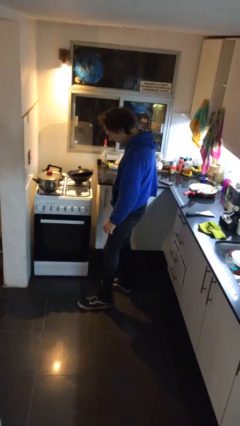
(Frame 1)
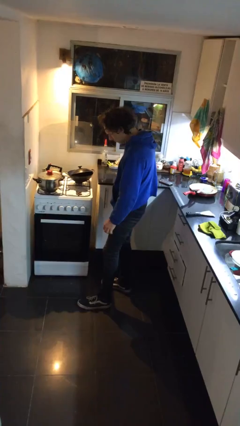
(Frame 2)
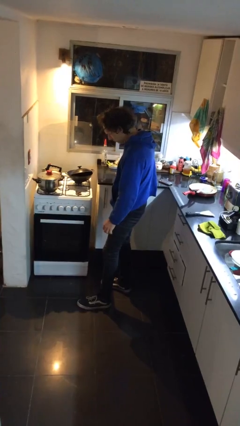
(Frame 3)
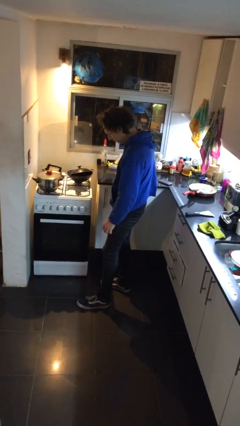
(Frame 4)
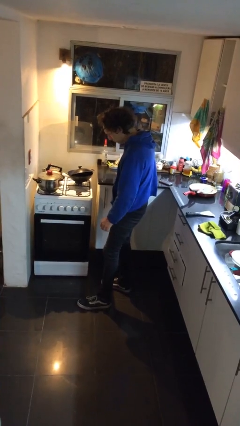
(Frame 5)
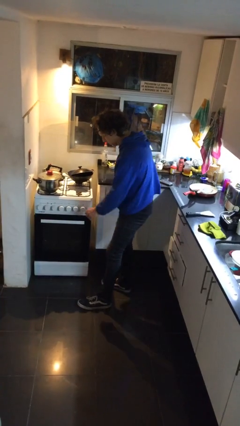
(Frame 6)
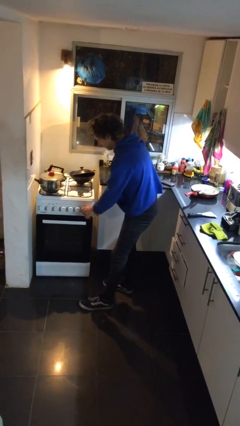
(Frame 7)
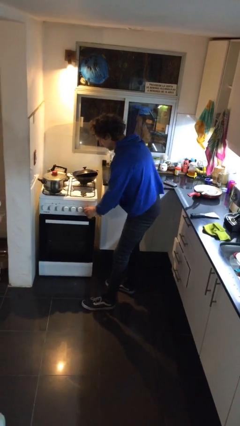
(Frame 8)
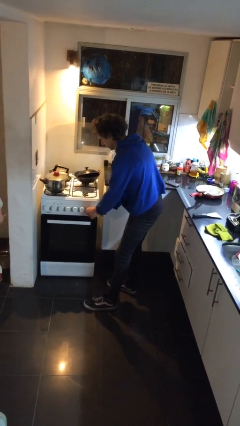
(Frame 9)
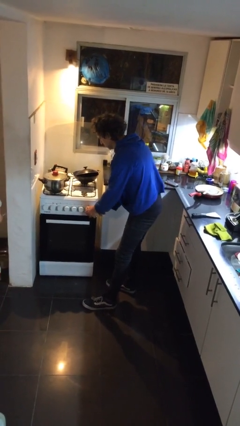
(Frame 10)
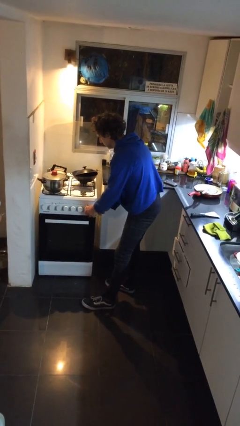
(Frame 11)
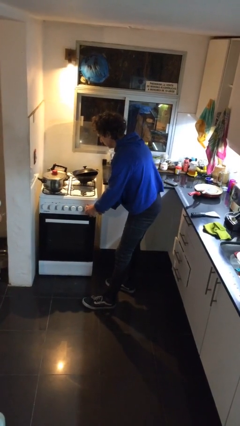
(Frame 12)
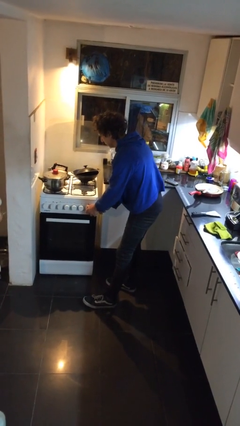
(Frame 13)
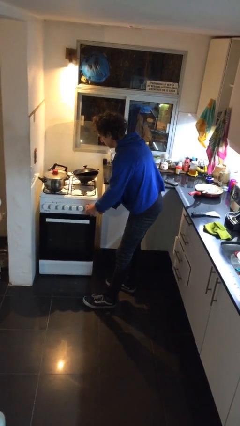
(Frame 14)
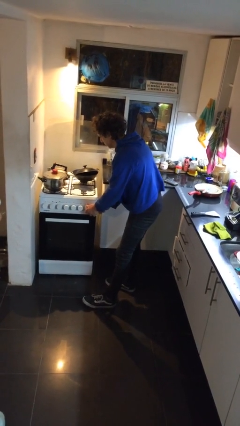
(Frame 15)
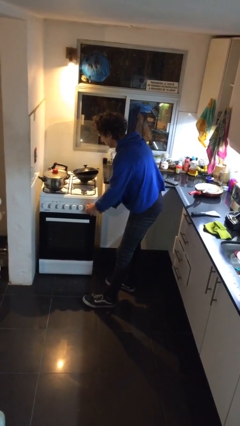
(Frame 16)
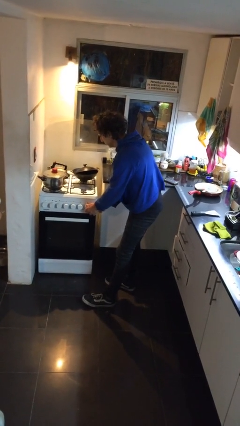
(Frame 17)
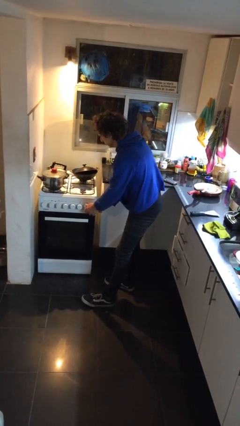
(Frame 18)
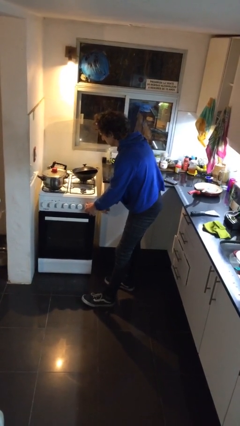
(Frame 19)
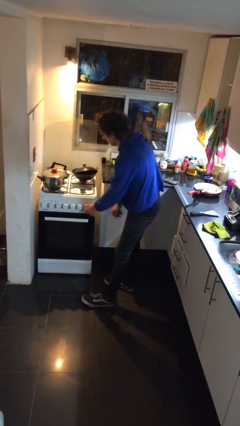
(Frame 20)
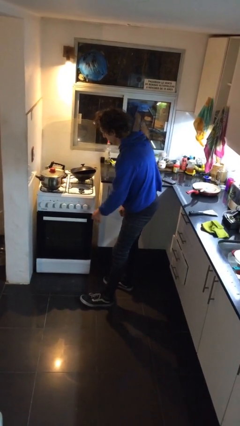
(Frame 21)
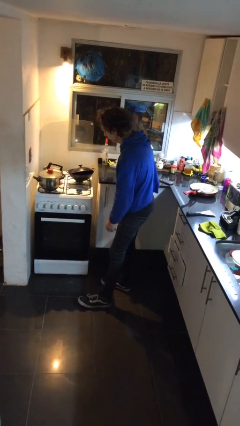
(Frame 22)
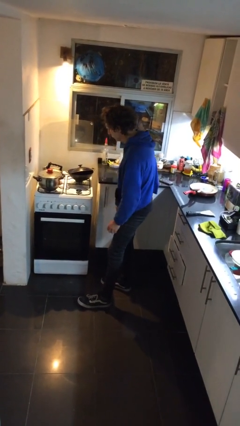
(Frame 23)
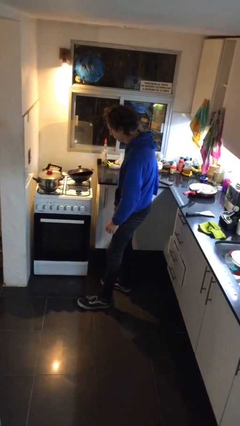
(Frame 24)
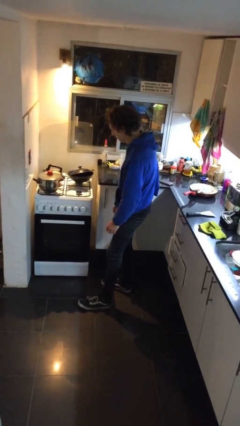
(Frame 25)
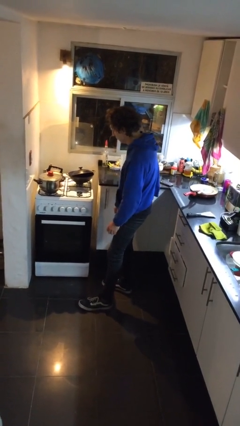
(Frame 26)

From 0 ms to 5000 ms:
person turns on stovetop

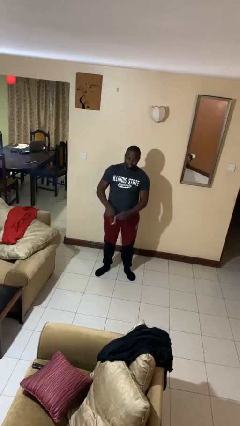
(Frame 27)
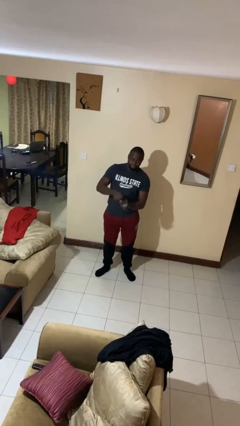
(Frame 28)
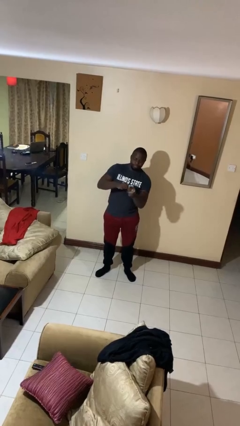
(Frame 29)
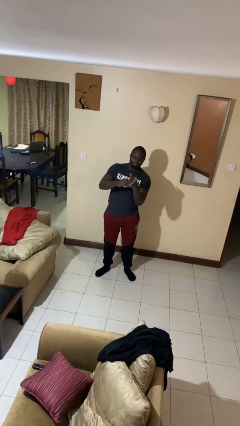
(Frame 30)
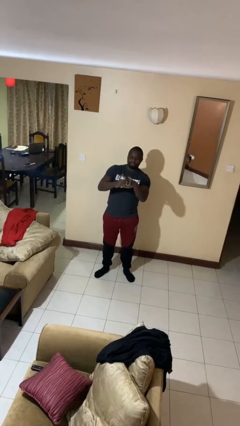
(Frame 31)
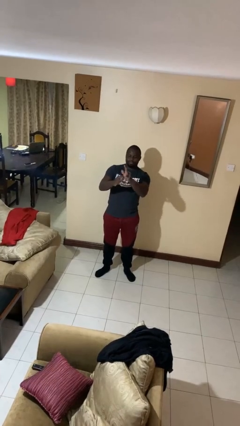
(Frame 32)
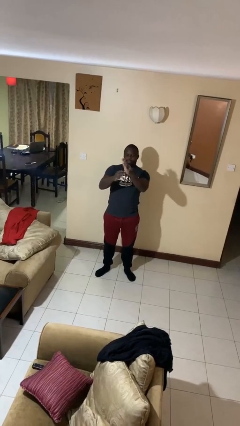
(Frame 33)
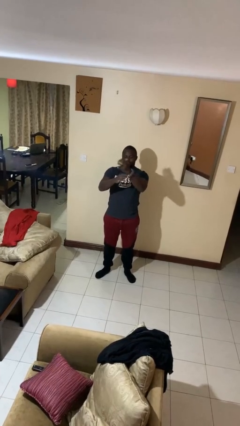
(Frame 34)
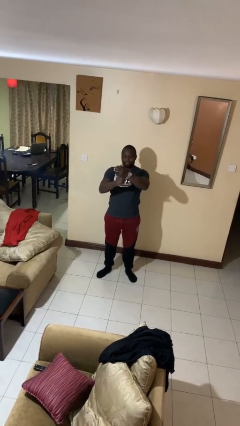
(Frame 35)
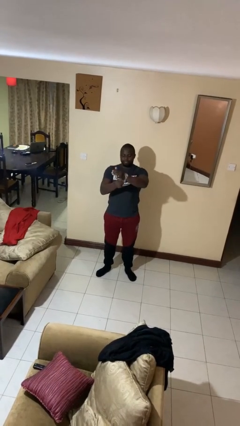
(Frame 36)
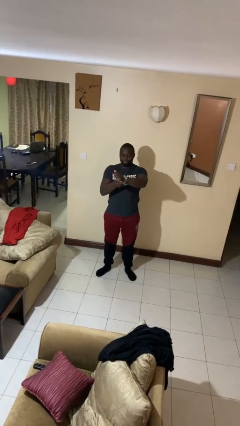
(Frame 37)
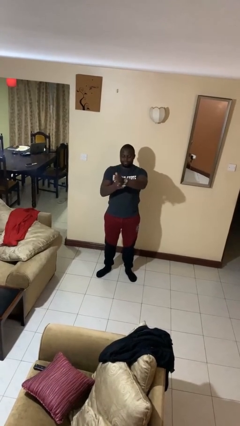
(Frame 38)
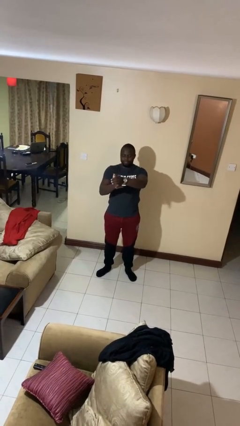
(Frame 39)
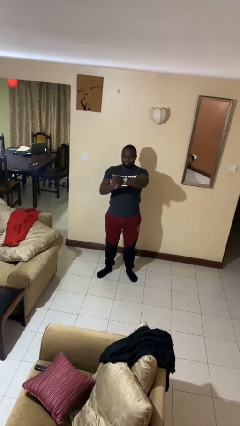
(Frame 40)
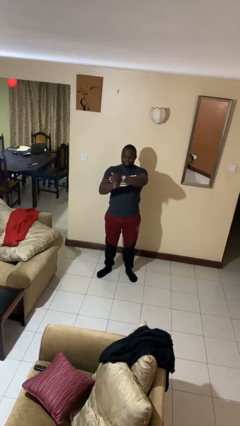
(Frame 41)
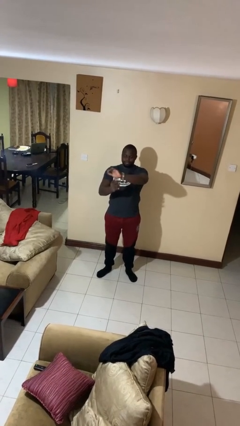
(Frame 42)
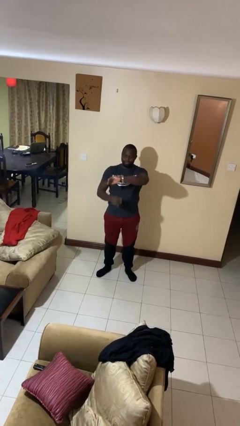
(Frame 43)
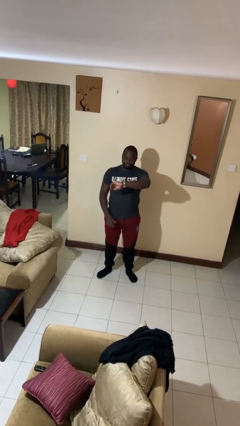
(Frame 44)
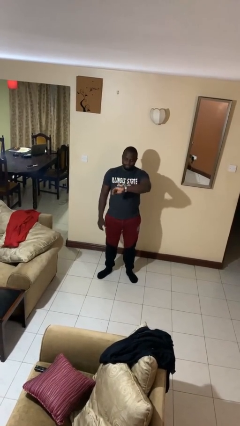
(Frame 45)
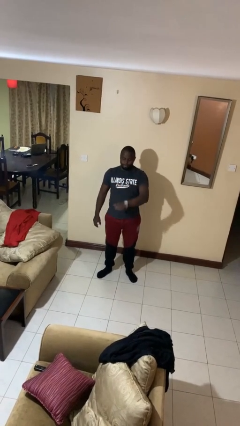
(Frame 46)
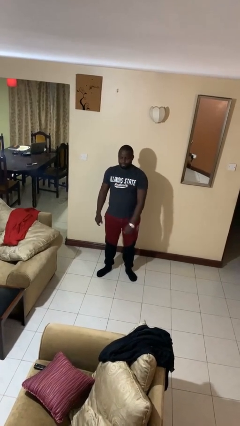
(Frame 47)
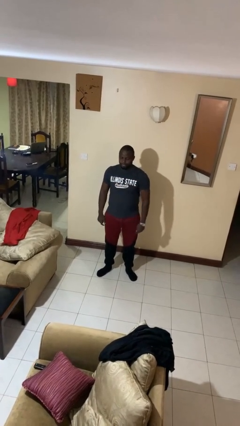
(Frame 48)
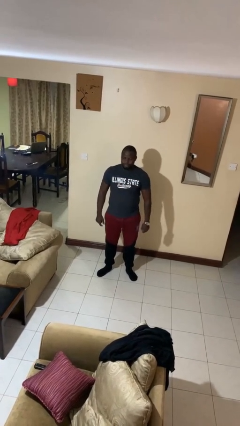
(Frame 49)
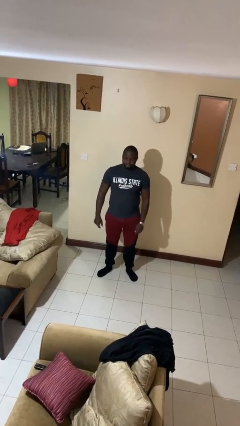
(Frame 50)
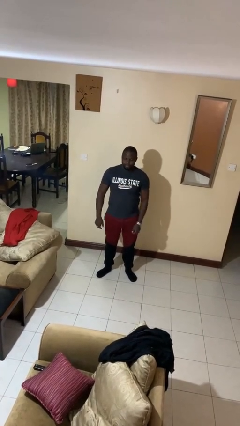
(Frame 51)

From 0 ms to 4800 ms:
person puts on wristwatch

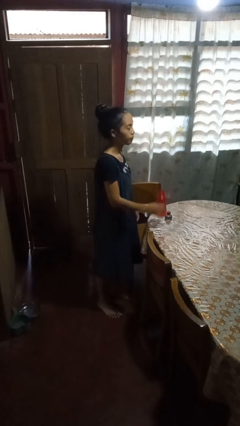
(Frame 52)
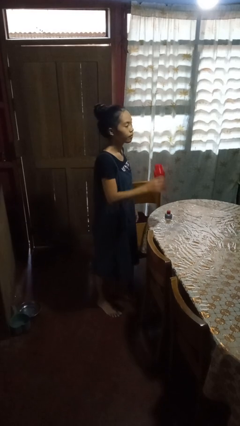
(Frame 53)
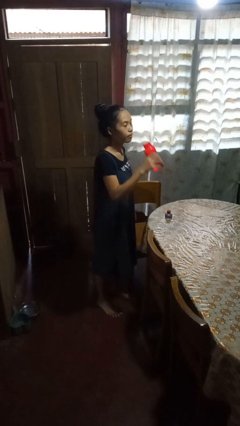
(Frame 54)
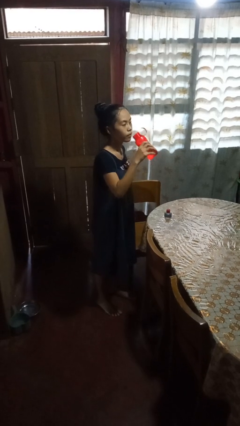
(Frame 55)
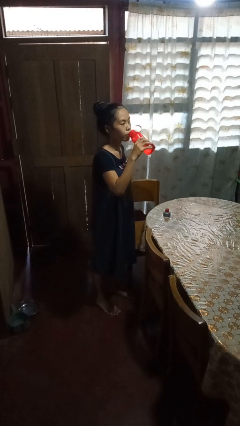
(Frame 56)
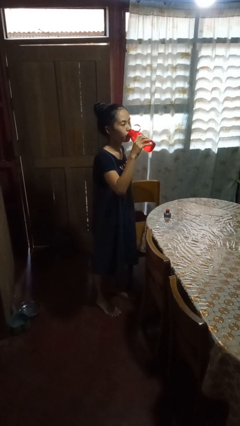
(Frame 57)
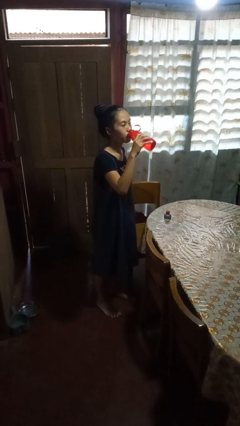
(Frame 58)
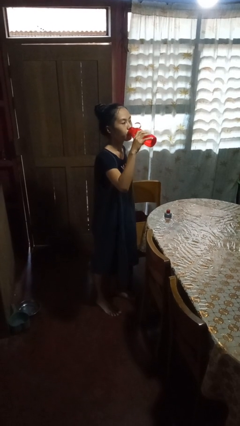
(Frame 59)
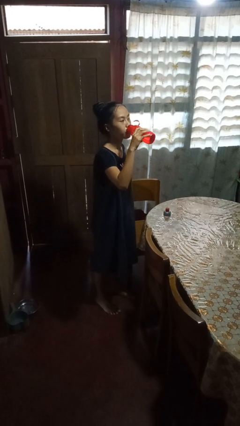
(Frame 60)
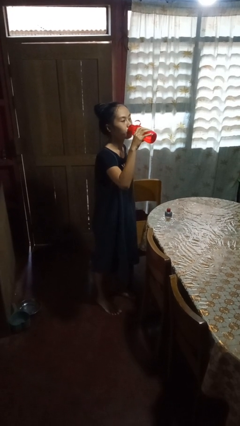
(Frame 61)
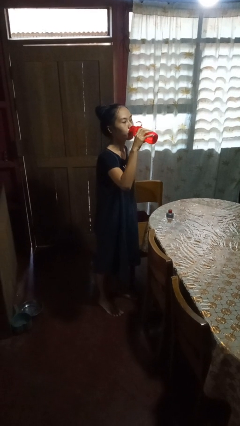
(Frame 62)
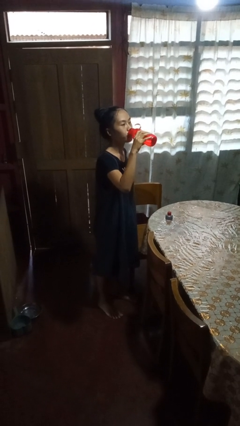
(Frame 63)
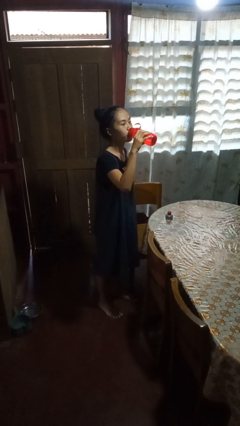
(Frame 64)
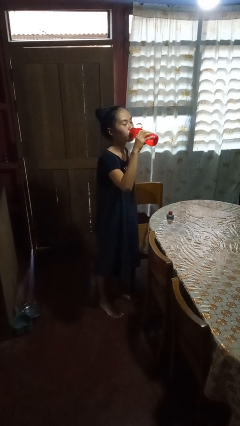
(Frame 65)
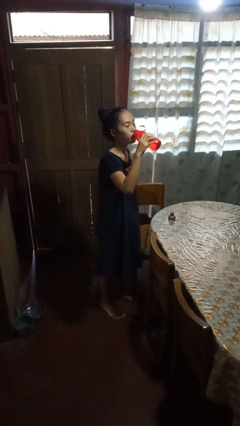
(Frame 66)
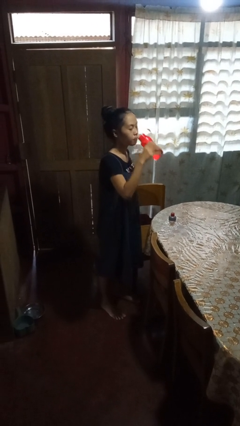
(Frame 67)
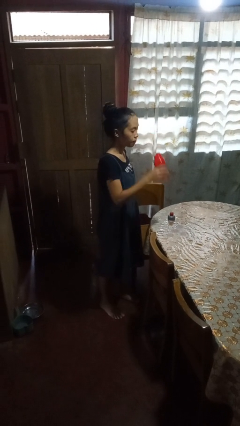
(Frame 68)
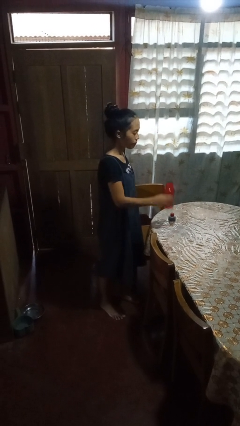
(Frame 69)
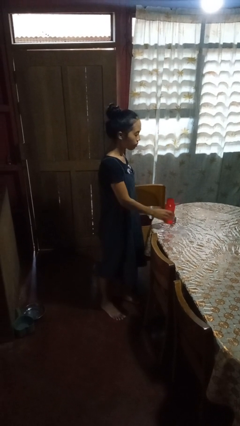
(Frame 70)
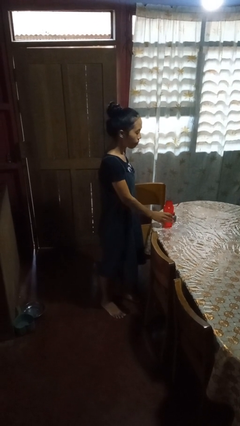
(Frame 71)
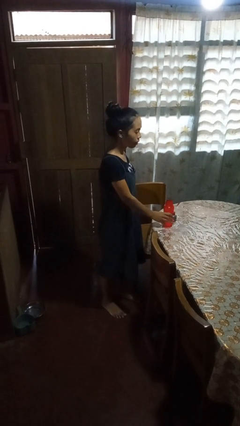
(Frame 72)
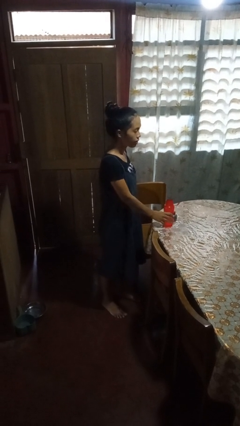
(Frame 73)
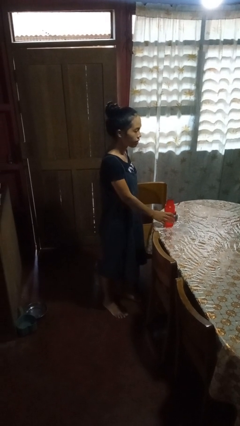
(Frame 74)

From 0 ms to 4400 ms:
person drinks from bottle

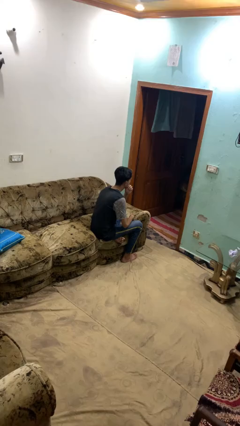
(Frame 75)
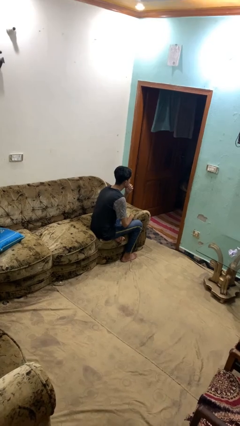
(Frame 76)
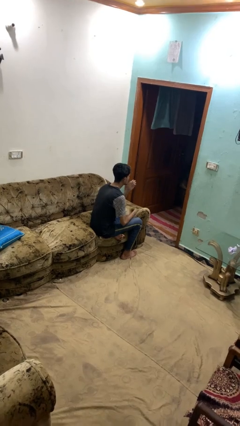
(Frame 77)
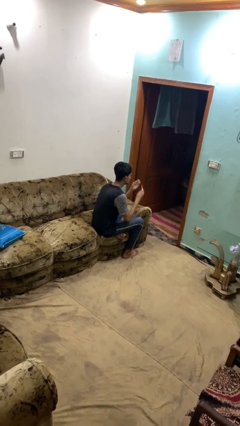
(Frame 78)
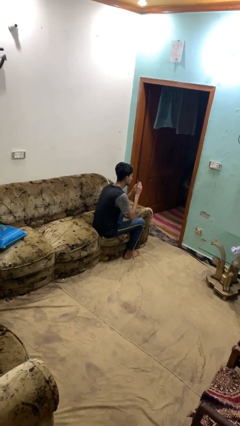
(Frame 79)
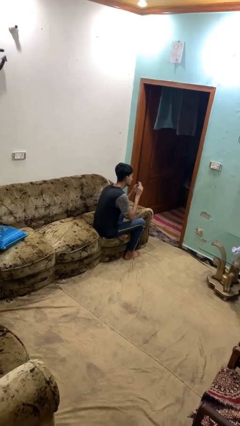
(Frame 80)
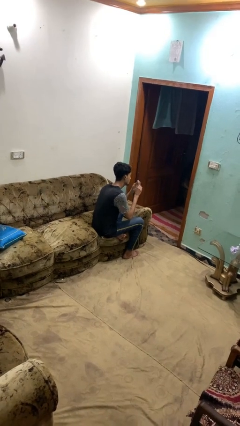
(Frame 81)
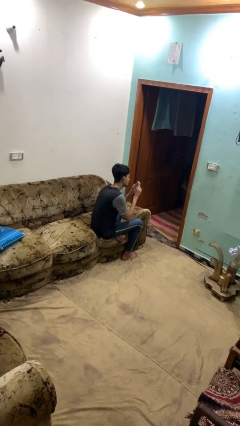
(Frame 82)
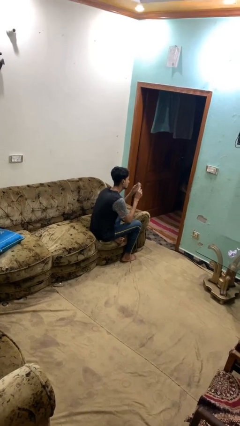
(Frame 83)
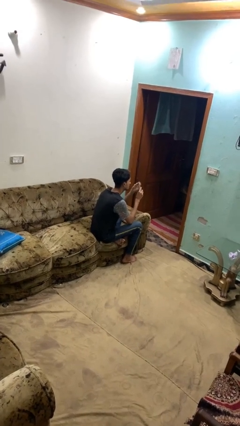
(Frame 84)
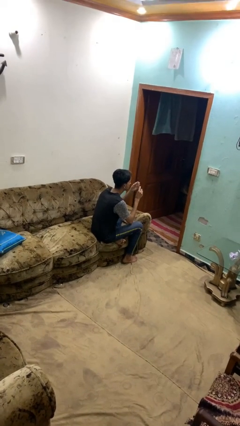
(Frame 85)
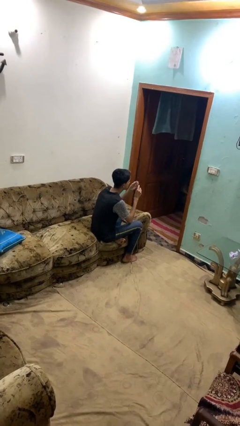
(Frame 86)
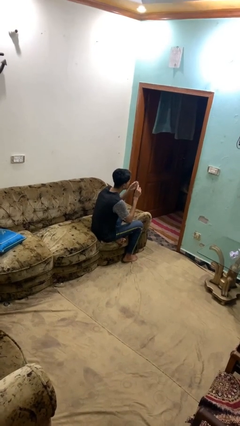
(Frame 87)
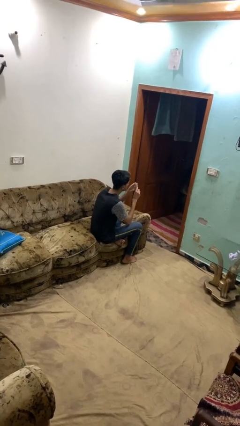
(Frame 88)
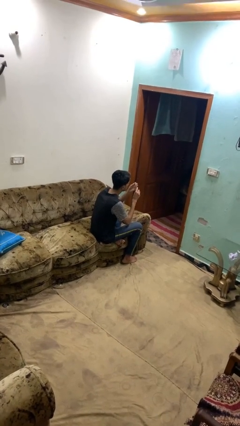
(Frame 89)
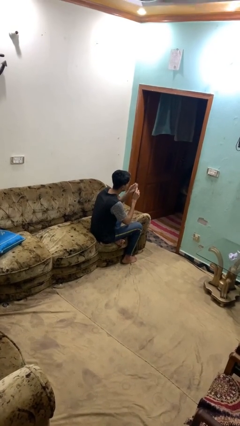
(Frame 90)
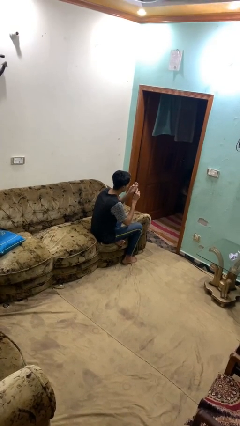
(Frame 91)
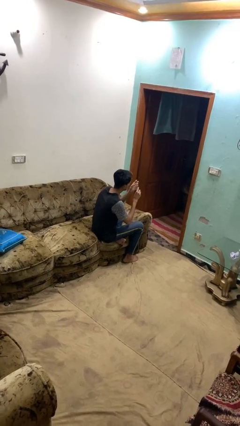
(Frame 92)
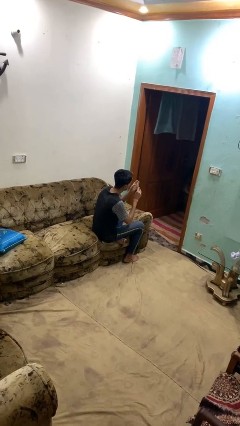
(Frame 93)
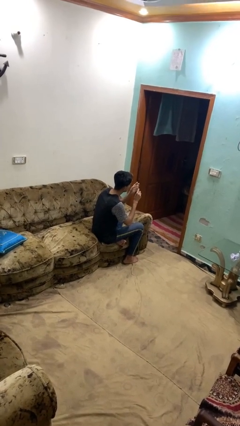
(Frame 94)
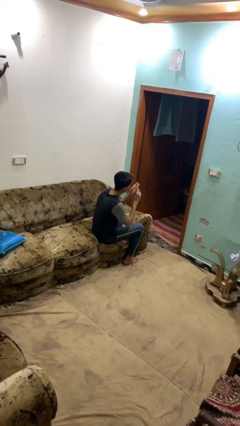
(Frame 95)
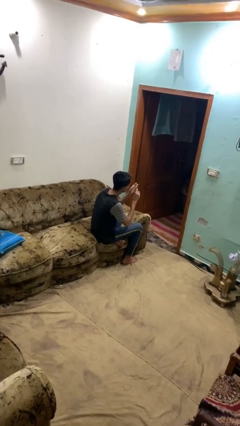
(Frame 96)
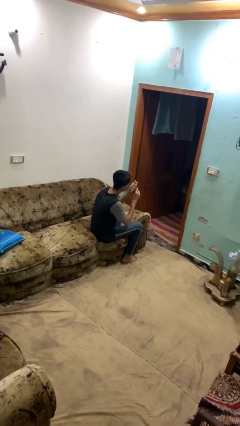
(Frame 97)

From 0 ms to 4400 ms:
person files fingernails
